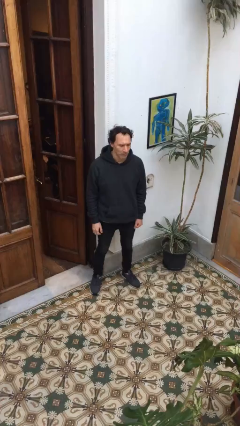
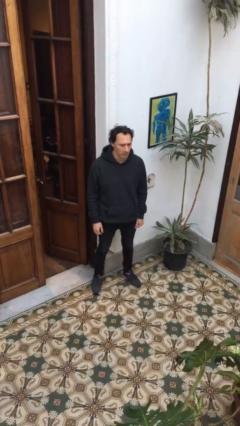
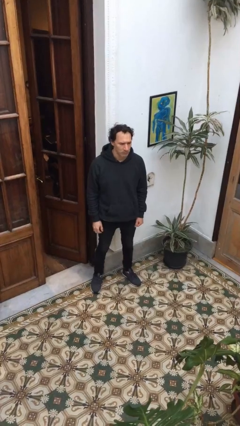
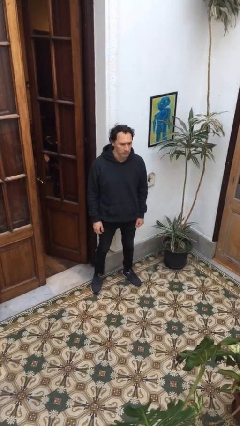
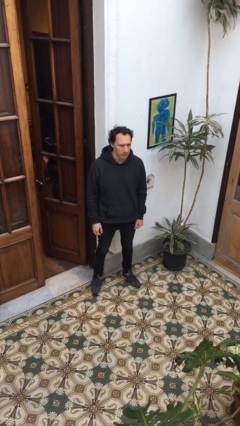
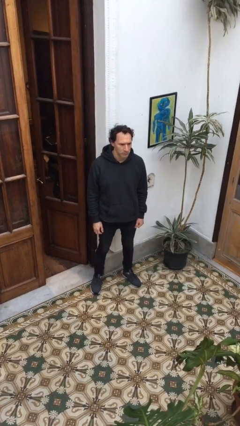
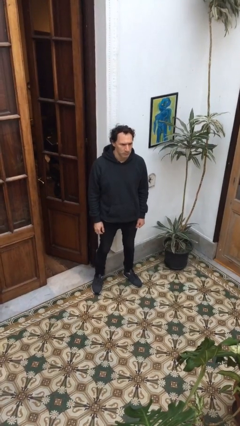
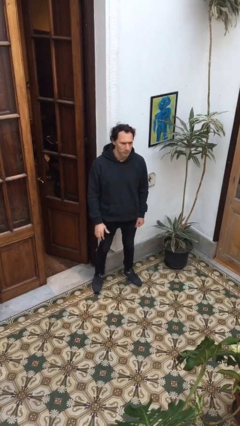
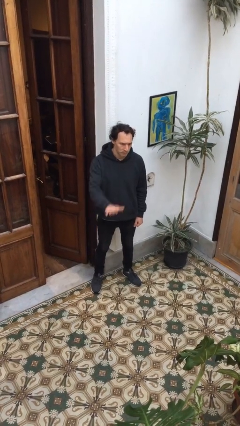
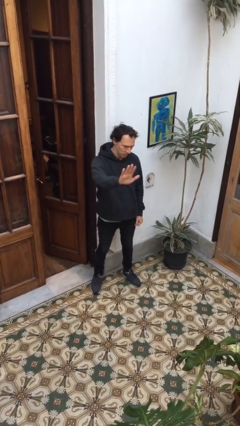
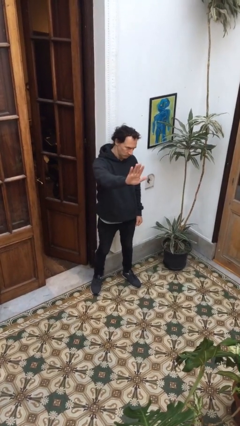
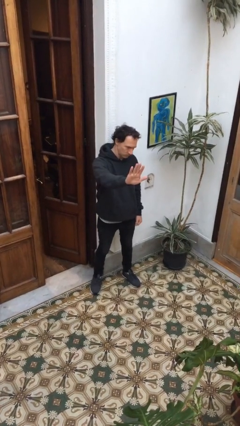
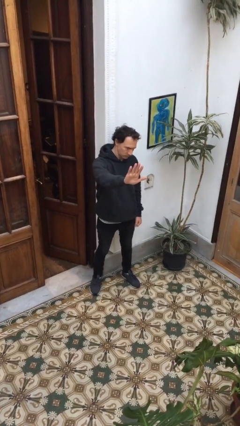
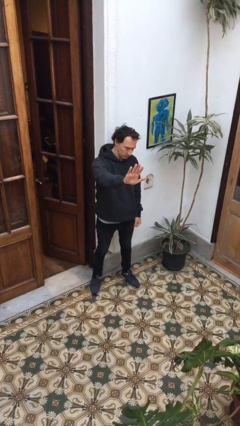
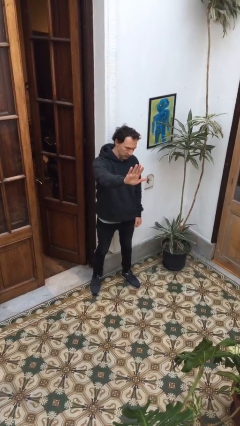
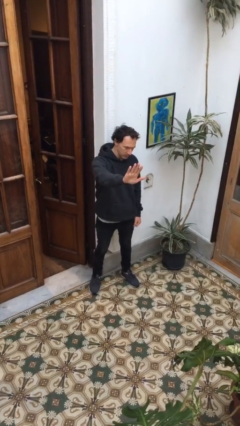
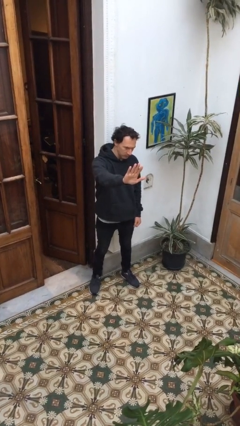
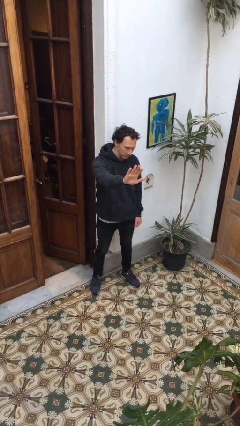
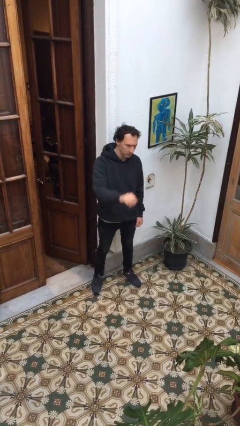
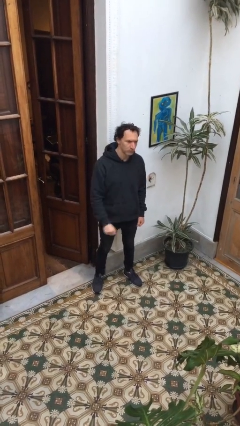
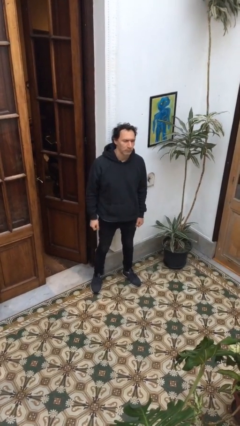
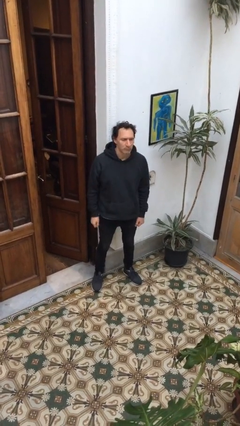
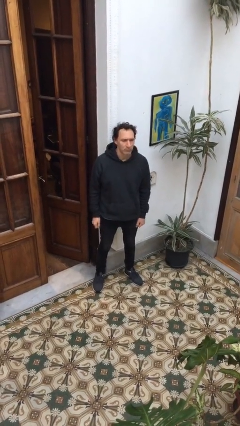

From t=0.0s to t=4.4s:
person gestures stop

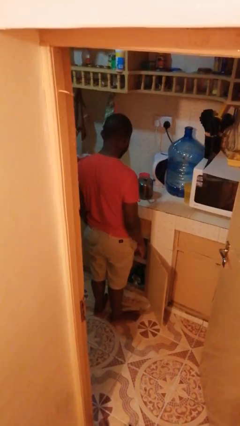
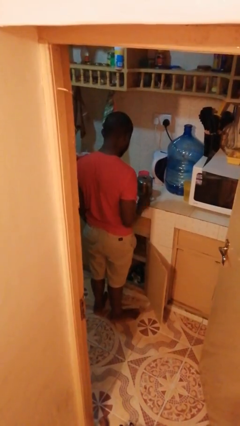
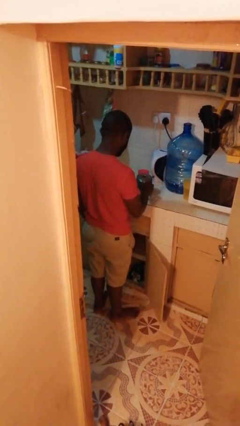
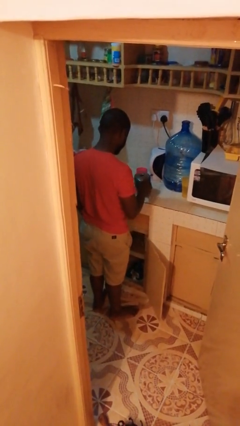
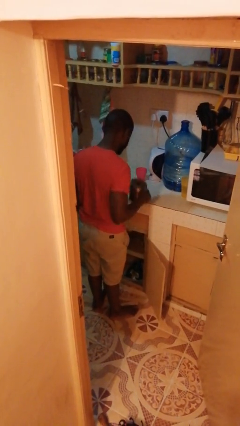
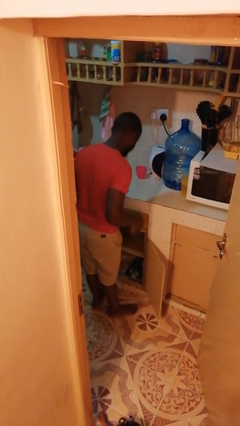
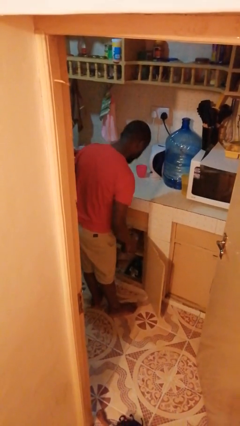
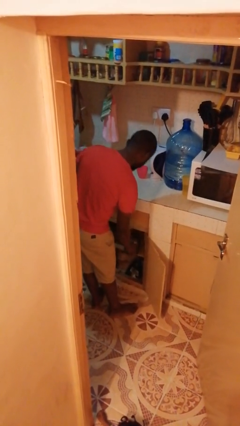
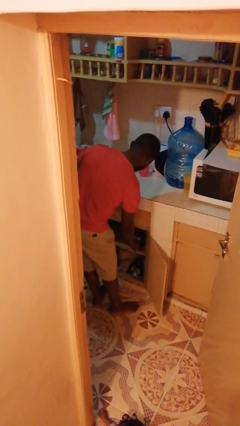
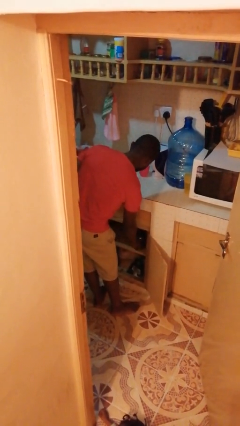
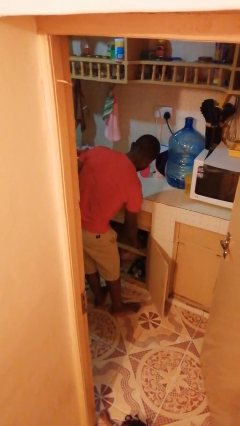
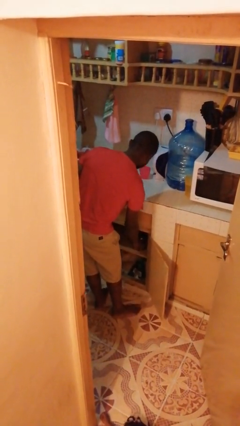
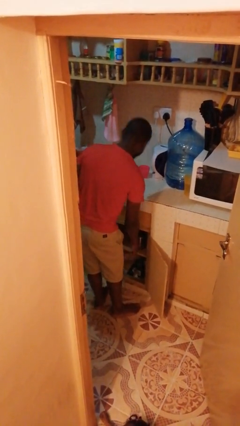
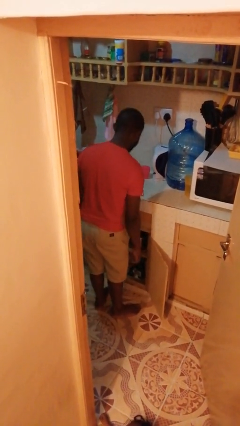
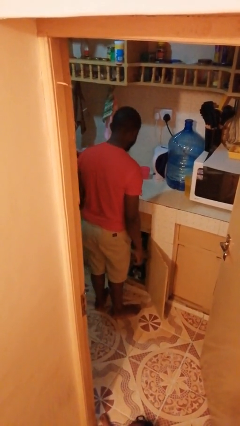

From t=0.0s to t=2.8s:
person puts object in cabinet

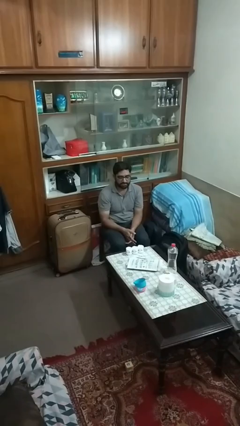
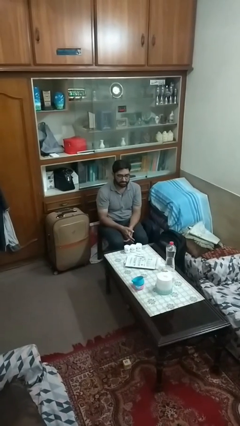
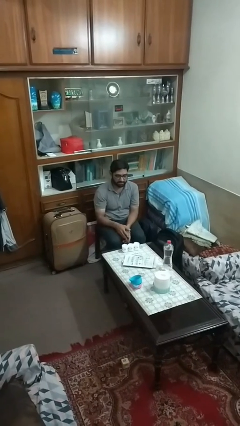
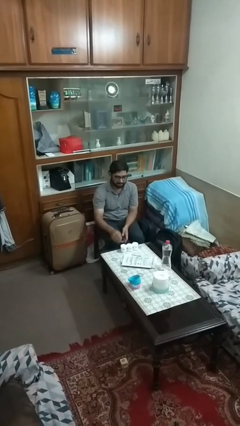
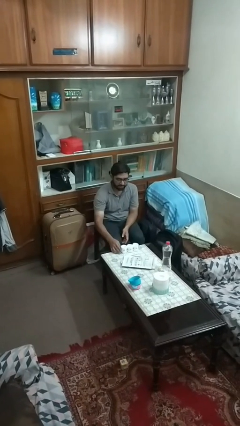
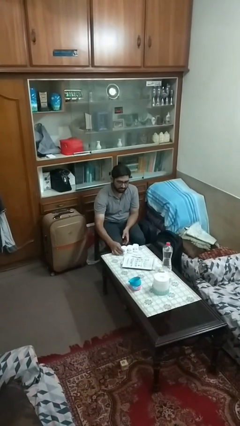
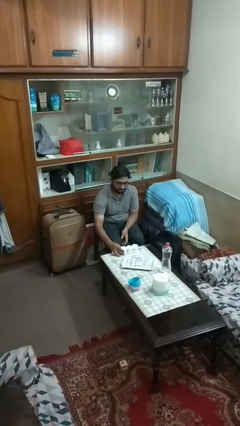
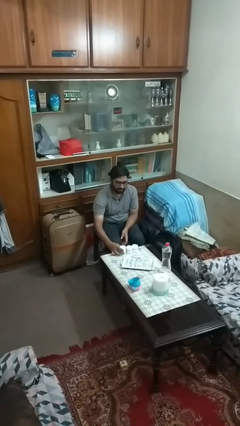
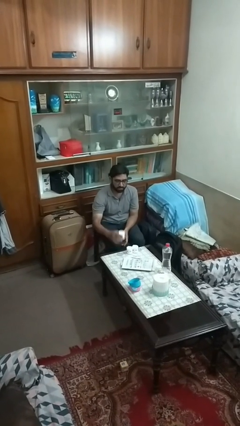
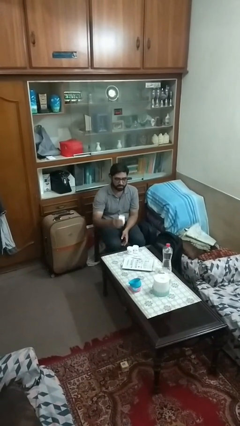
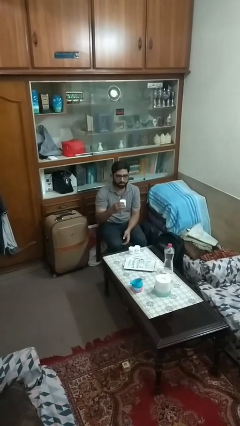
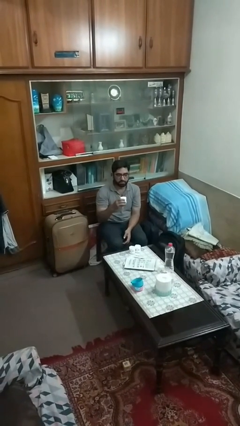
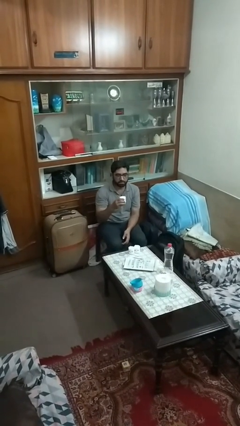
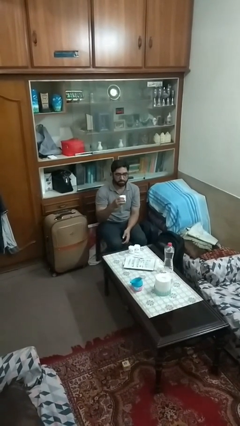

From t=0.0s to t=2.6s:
person picks up object from table

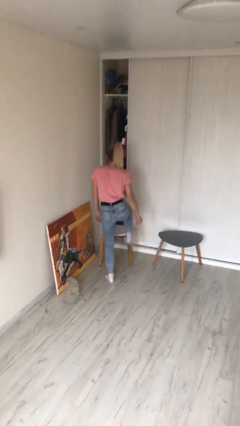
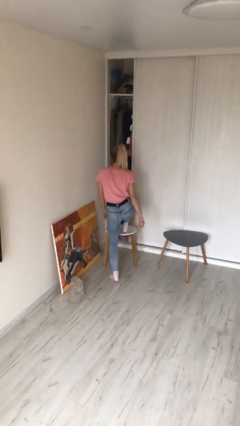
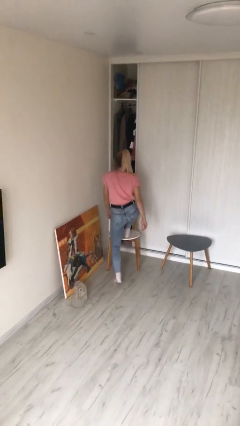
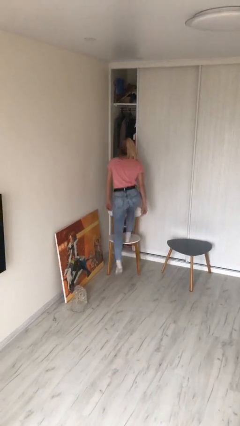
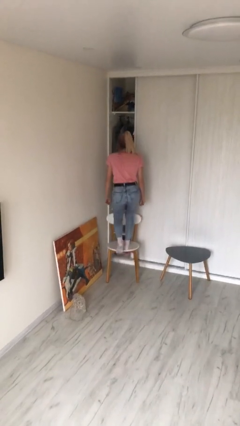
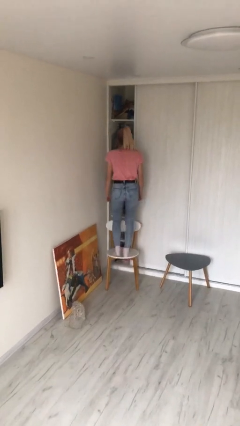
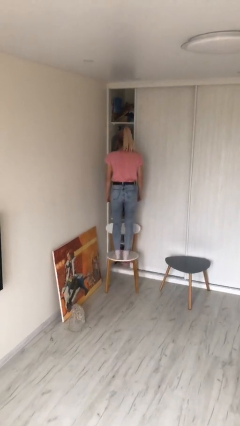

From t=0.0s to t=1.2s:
person climbs on chair

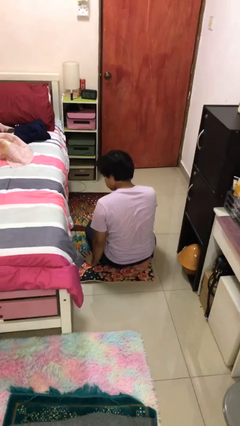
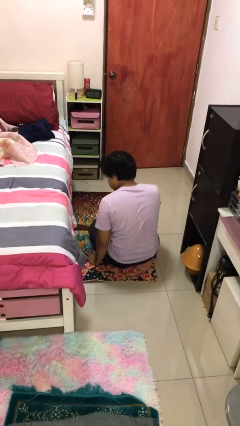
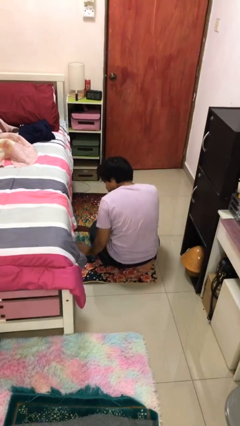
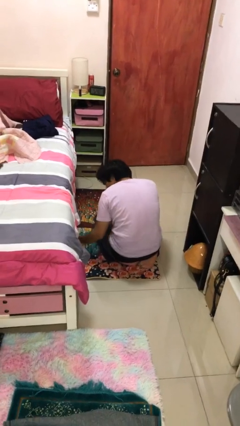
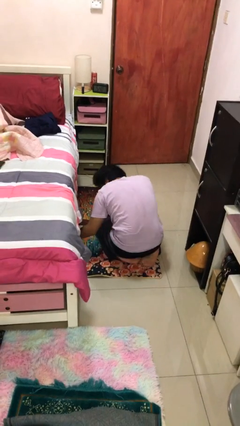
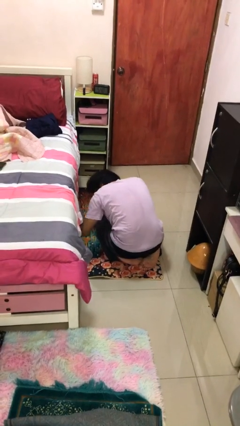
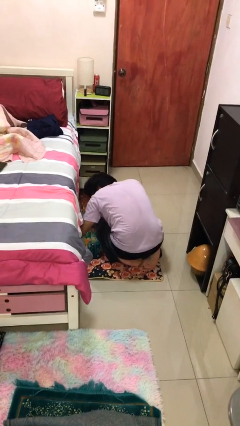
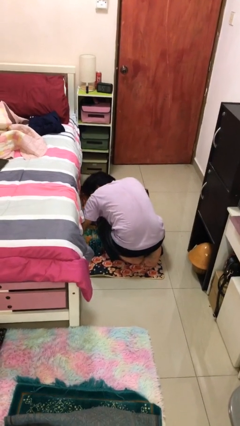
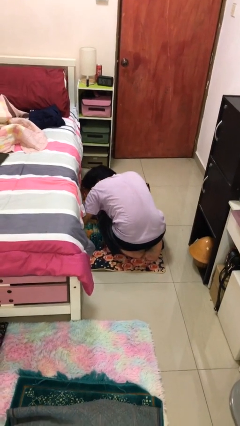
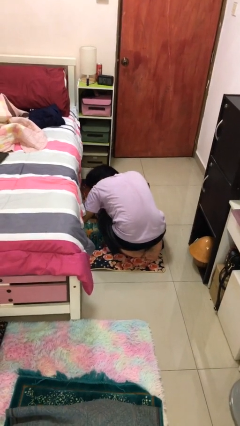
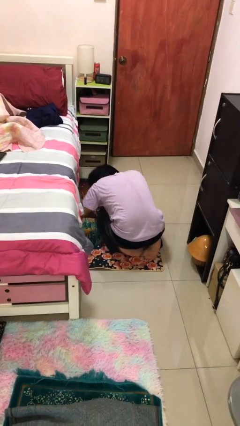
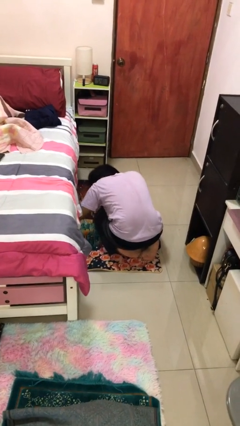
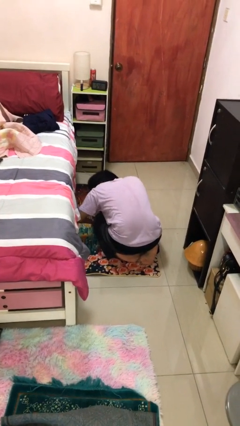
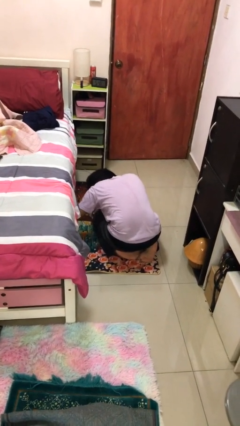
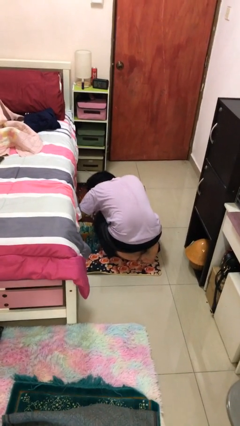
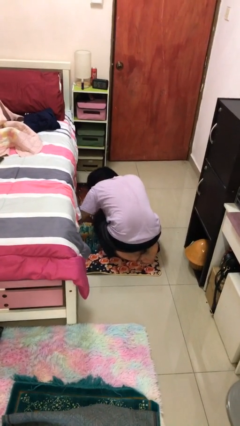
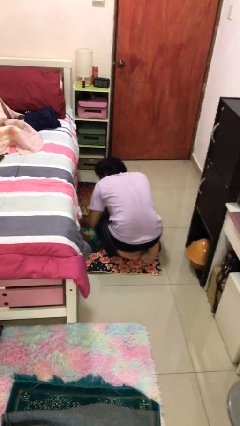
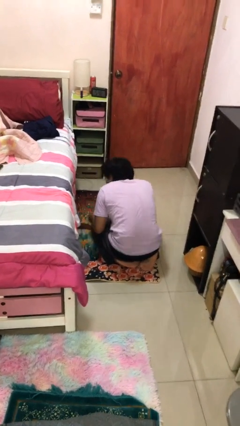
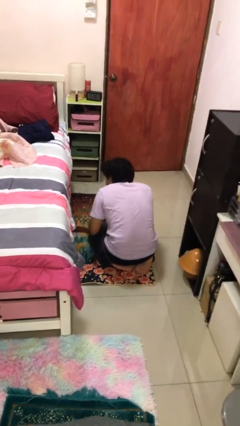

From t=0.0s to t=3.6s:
person searches under bed

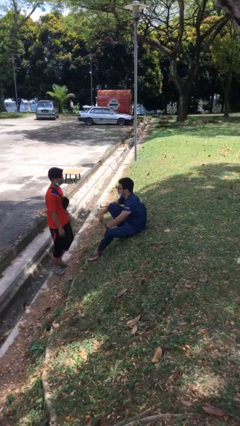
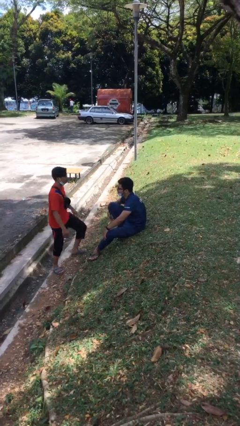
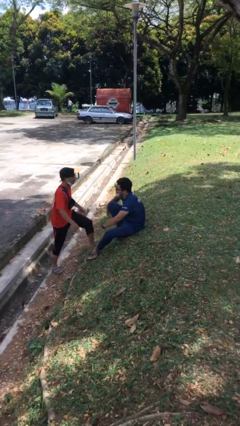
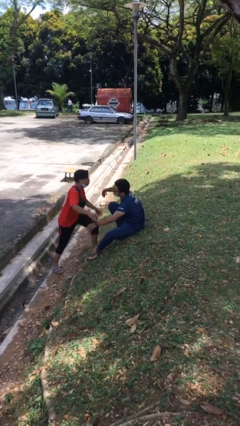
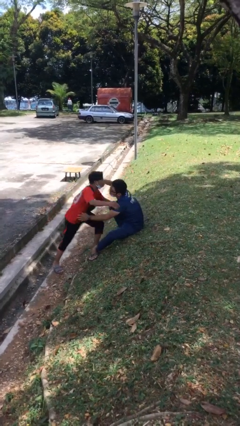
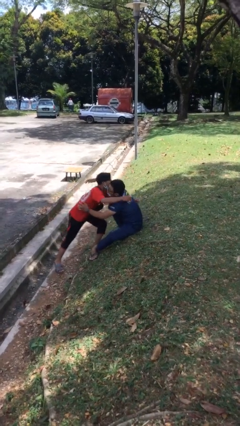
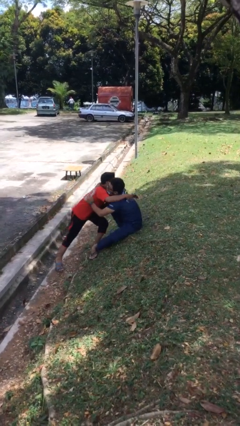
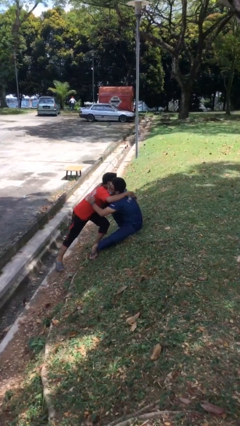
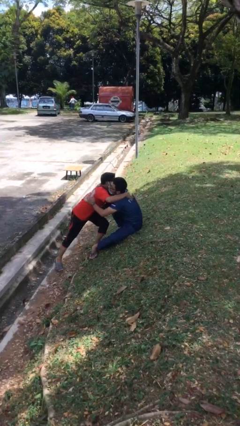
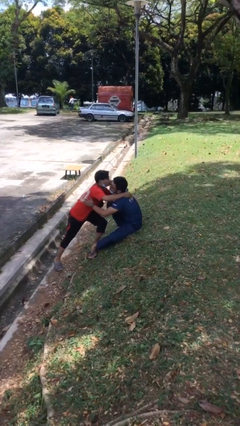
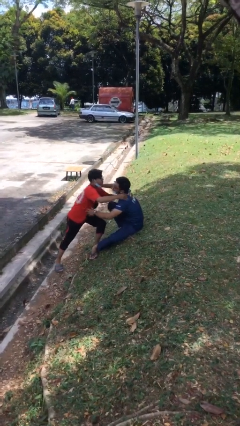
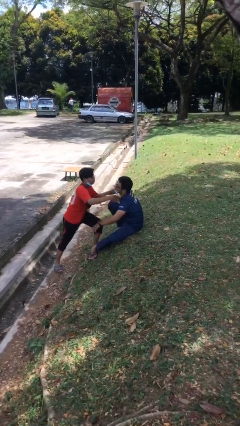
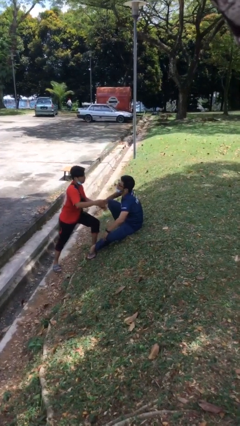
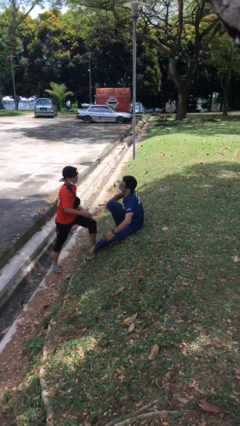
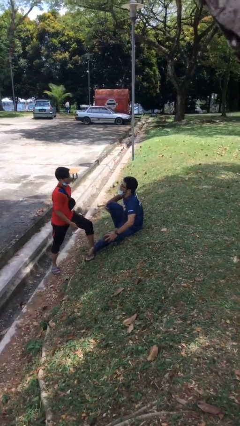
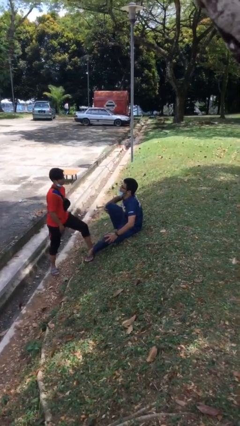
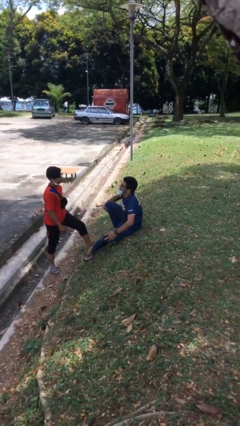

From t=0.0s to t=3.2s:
person embraces person
